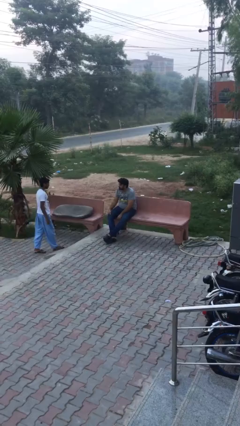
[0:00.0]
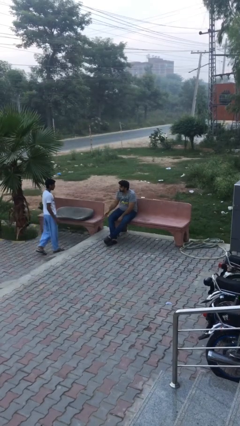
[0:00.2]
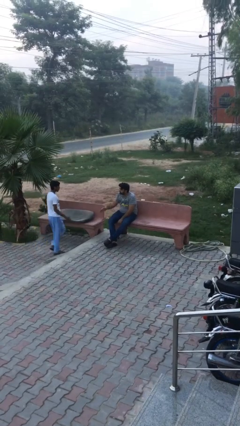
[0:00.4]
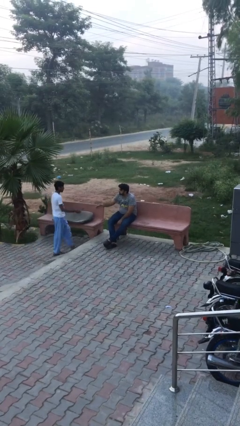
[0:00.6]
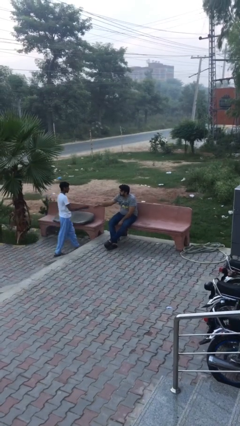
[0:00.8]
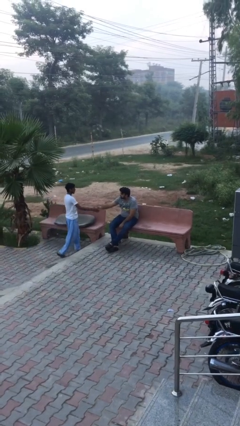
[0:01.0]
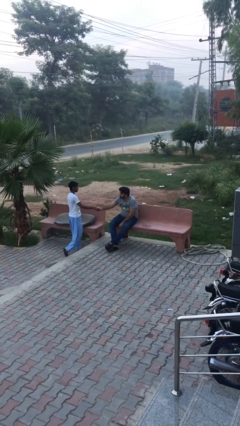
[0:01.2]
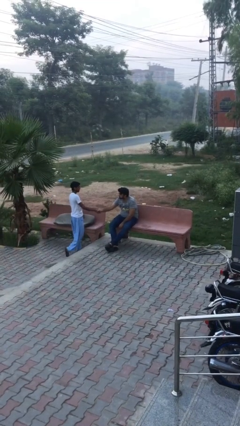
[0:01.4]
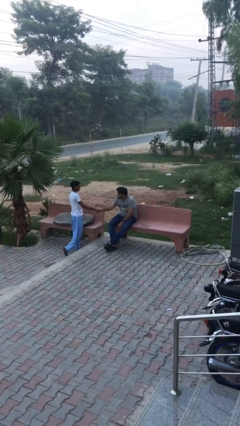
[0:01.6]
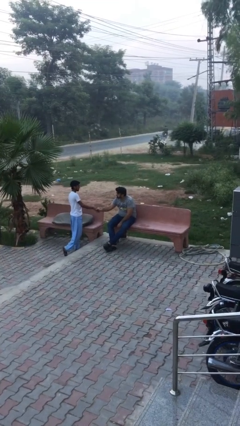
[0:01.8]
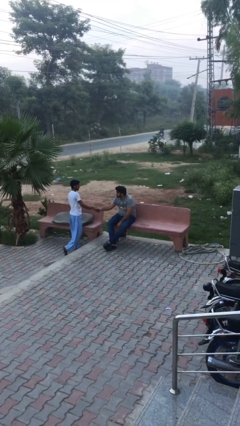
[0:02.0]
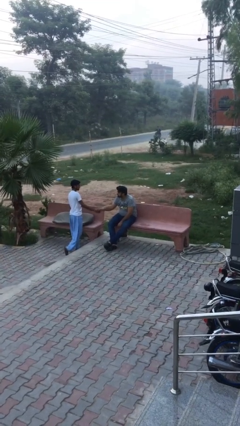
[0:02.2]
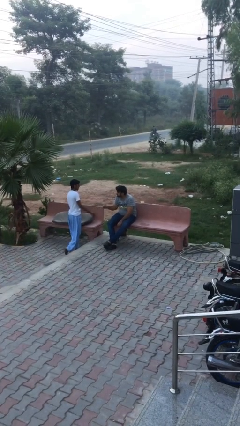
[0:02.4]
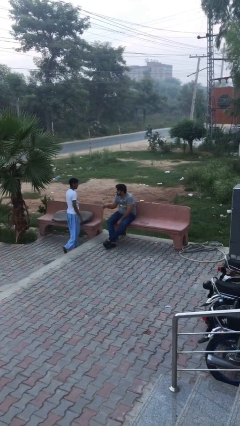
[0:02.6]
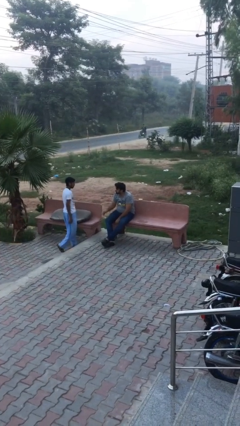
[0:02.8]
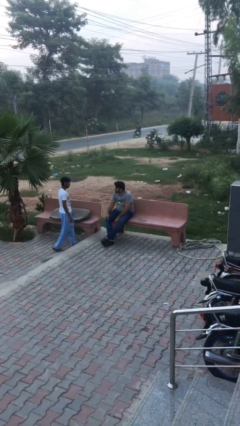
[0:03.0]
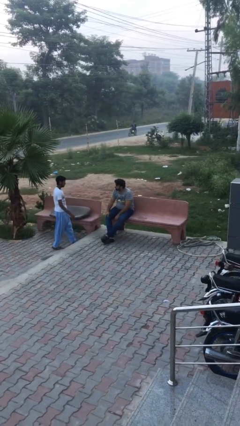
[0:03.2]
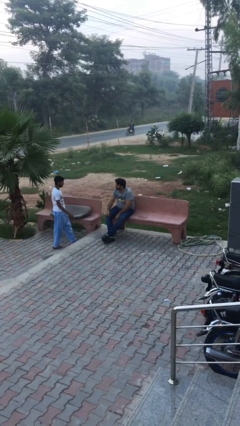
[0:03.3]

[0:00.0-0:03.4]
person shakes hand

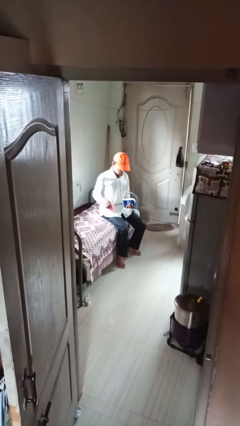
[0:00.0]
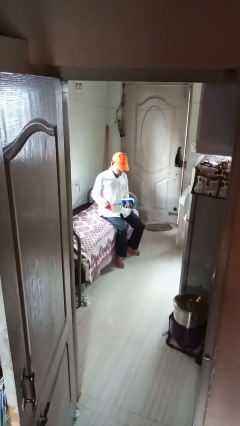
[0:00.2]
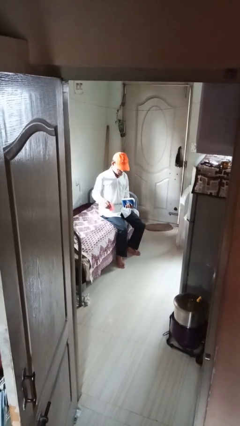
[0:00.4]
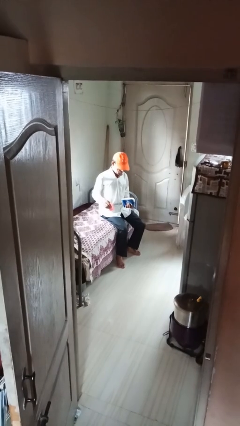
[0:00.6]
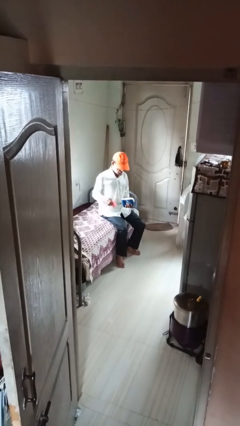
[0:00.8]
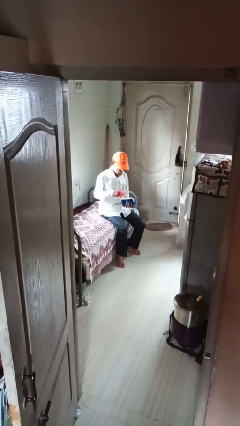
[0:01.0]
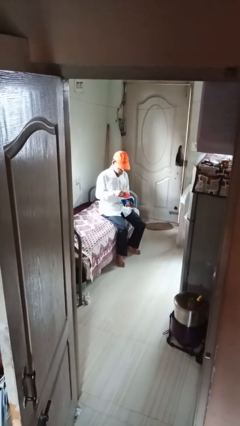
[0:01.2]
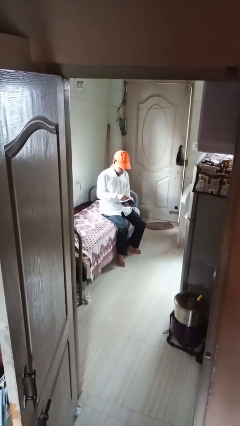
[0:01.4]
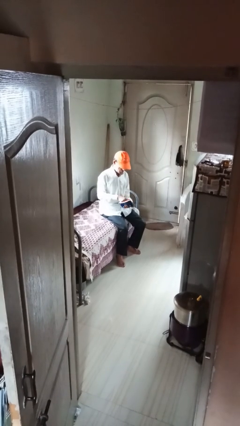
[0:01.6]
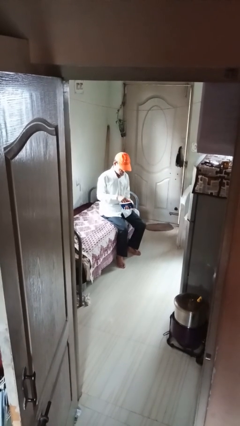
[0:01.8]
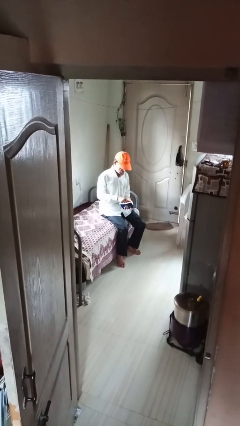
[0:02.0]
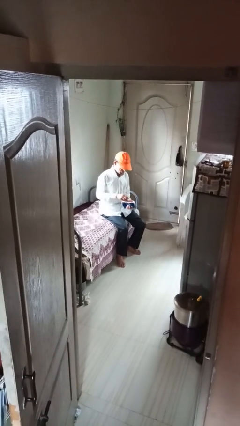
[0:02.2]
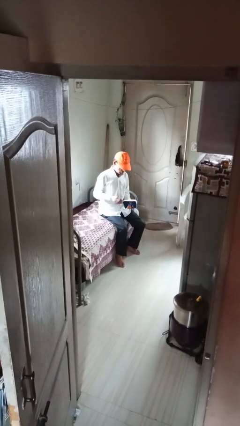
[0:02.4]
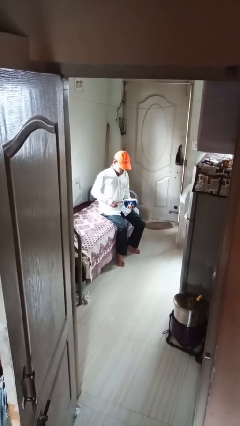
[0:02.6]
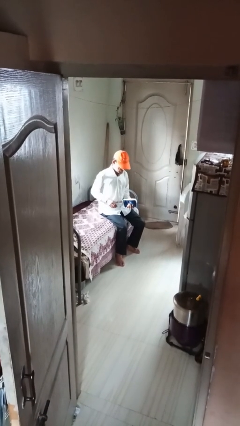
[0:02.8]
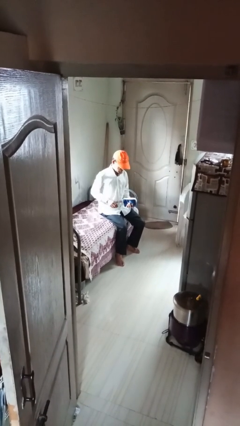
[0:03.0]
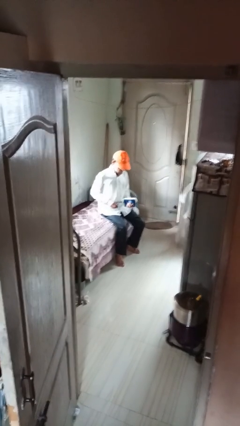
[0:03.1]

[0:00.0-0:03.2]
person puts object into purse

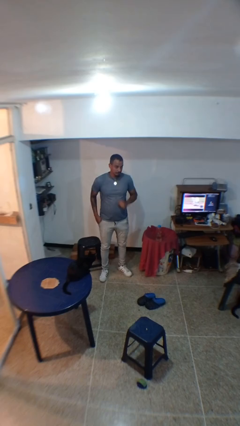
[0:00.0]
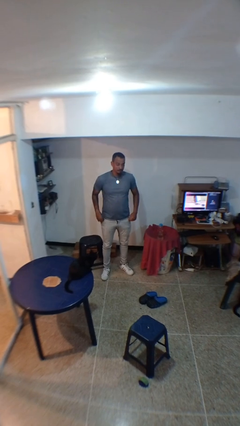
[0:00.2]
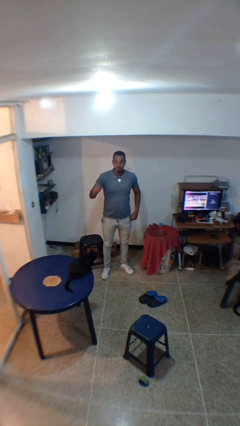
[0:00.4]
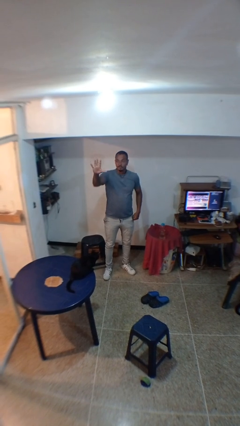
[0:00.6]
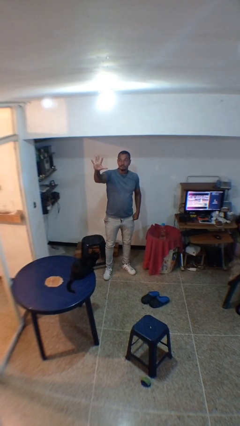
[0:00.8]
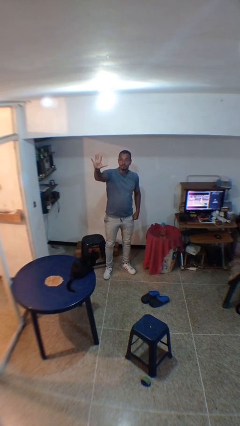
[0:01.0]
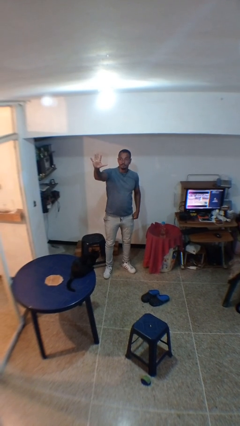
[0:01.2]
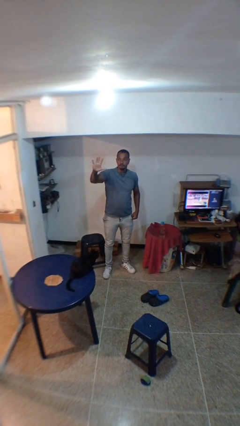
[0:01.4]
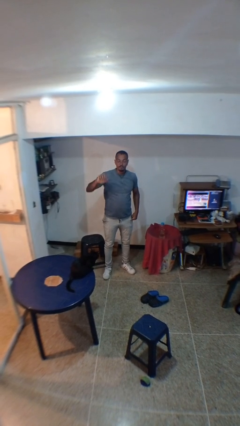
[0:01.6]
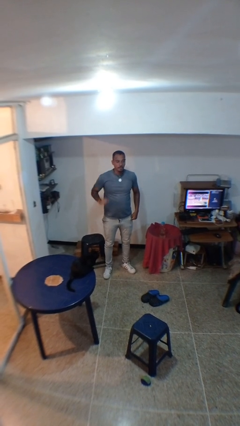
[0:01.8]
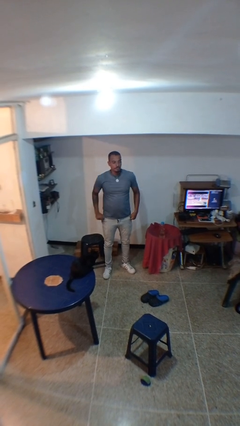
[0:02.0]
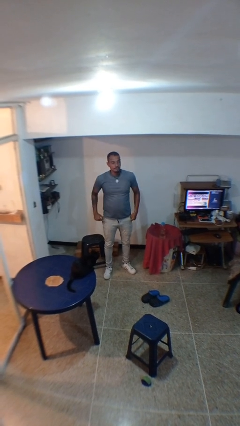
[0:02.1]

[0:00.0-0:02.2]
person gestures number five

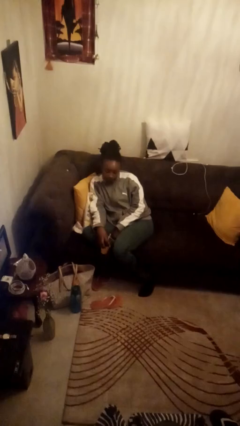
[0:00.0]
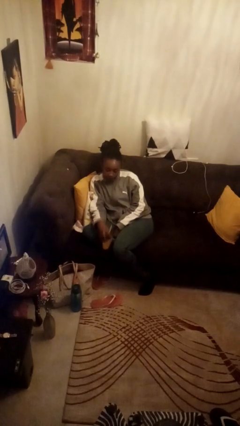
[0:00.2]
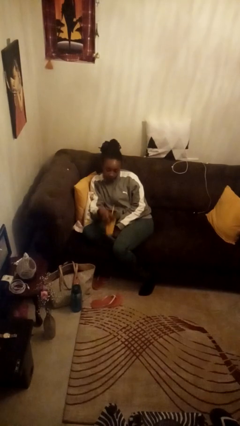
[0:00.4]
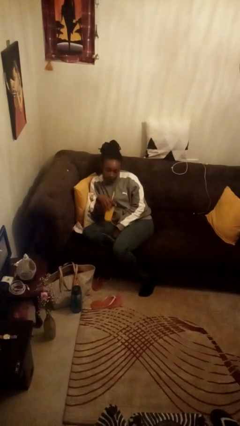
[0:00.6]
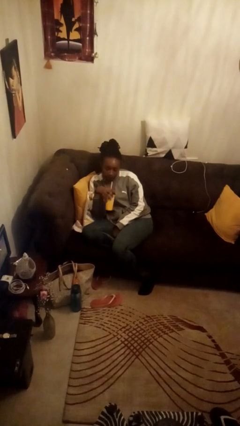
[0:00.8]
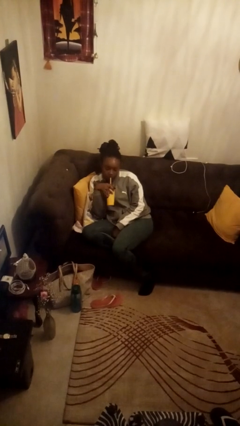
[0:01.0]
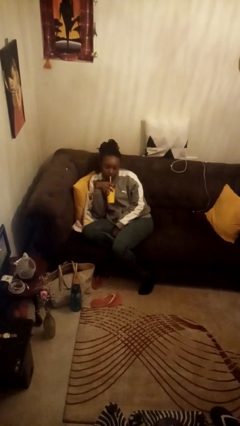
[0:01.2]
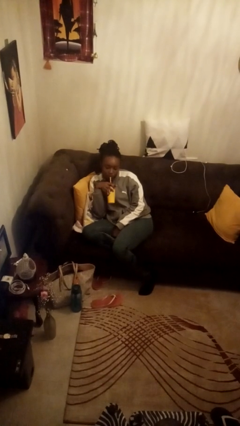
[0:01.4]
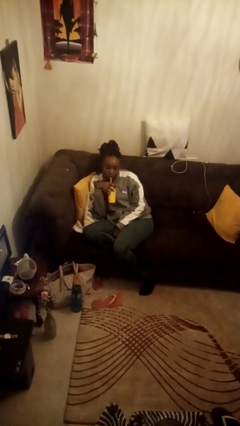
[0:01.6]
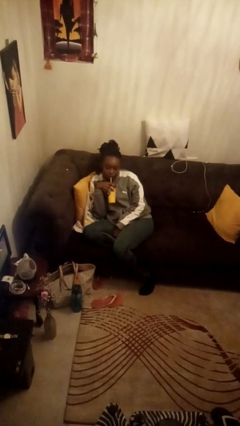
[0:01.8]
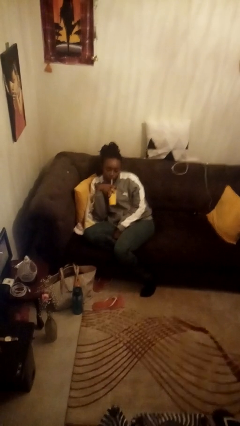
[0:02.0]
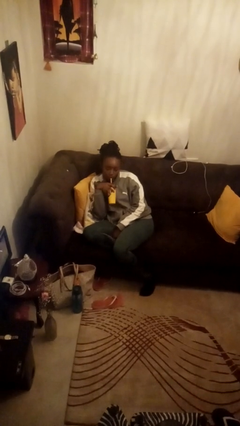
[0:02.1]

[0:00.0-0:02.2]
person drinks from straw

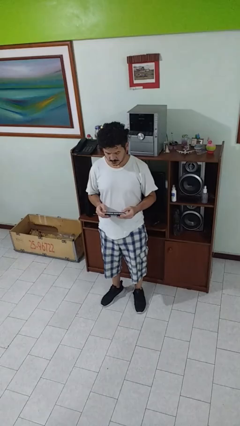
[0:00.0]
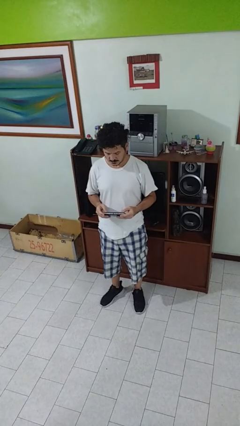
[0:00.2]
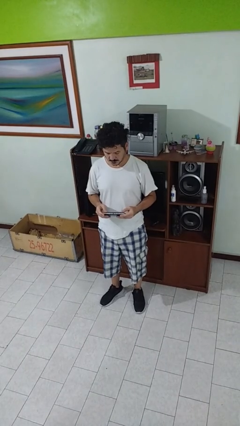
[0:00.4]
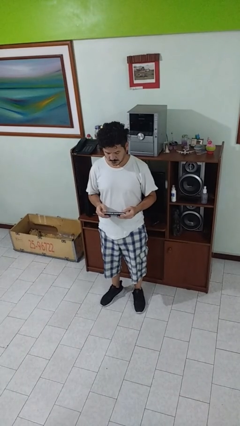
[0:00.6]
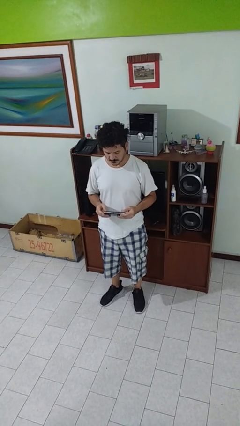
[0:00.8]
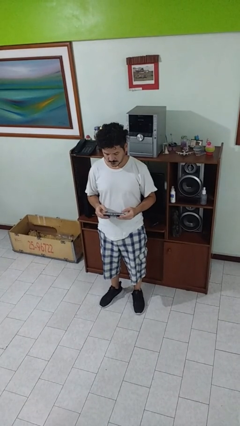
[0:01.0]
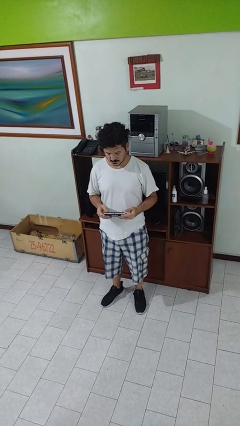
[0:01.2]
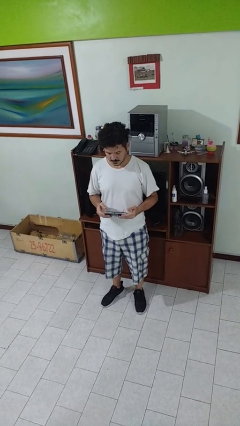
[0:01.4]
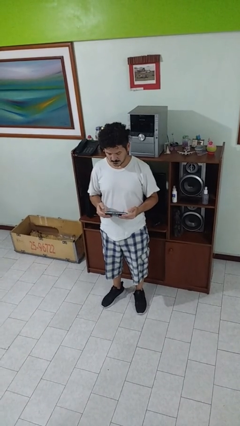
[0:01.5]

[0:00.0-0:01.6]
person interacts with handheld game

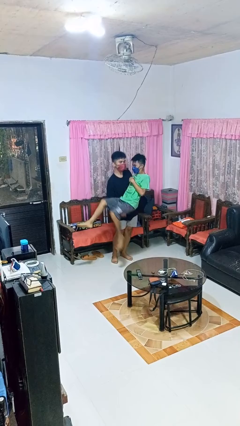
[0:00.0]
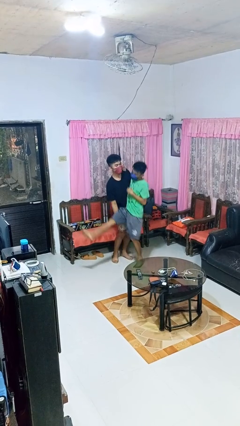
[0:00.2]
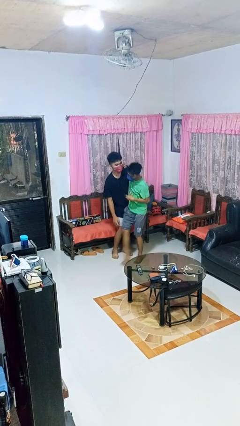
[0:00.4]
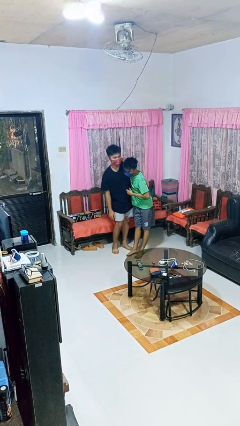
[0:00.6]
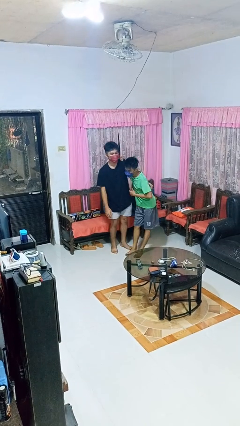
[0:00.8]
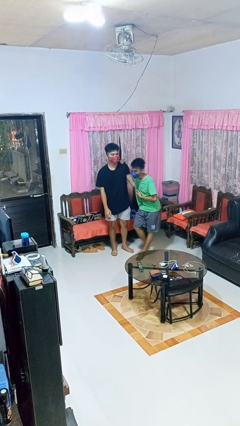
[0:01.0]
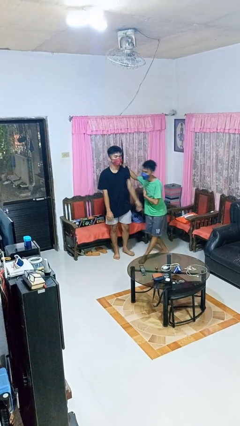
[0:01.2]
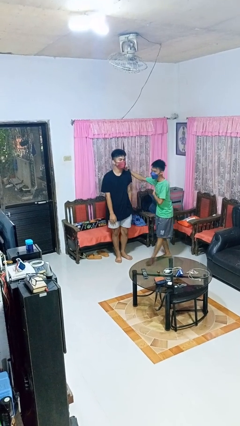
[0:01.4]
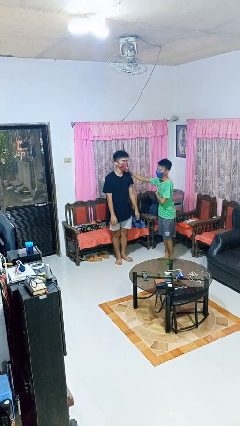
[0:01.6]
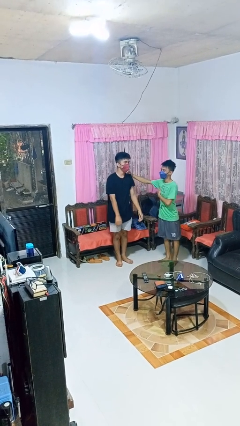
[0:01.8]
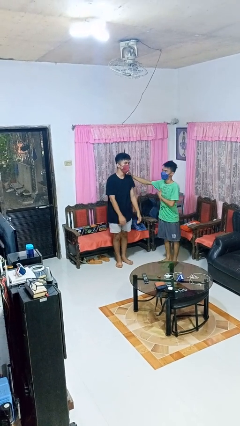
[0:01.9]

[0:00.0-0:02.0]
person puts down person

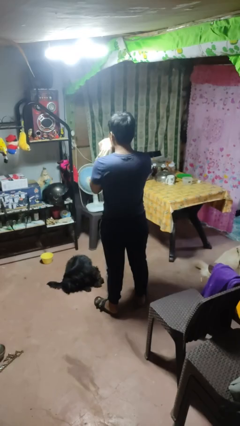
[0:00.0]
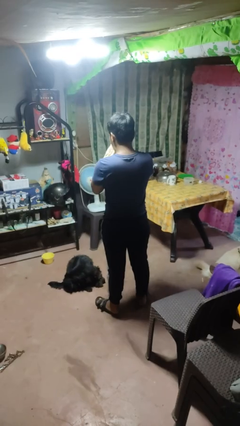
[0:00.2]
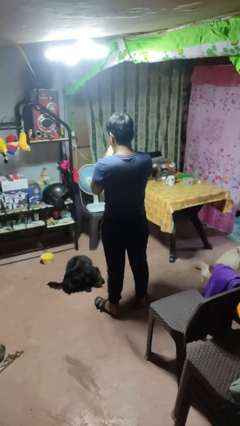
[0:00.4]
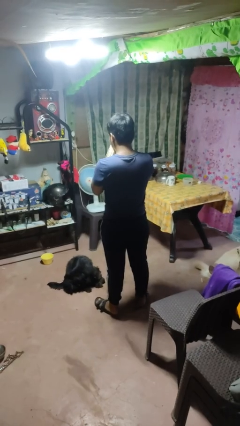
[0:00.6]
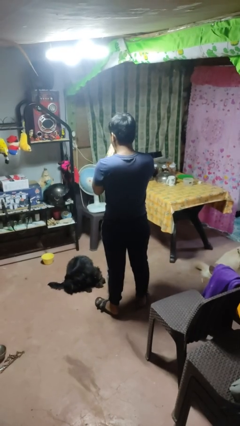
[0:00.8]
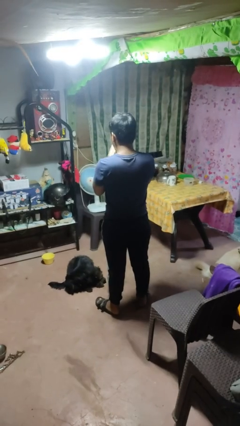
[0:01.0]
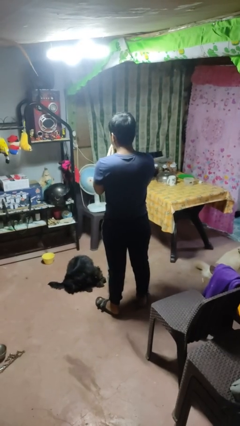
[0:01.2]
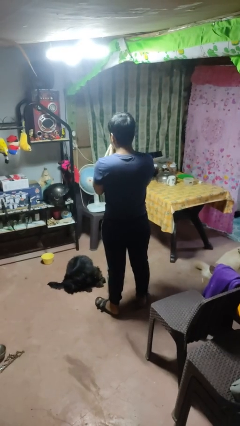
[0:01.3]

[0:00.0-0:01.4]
person blows nose

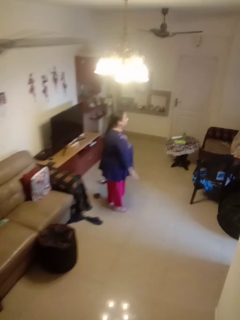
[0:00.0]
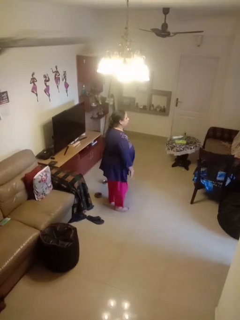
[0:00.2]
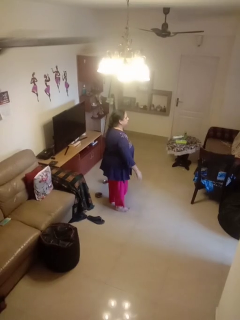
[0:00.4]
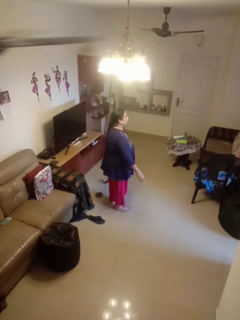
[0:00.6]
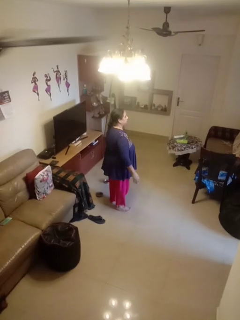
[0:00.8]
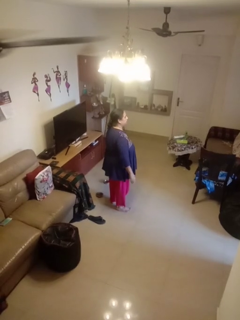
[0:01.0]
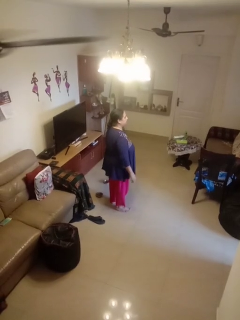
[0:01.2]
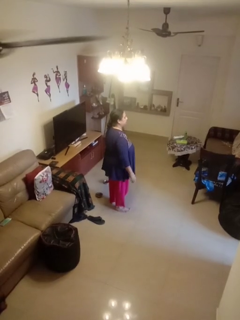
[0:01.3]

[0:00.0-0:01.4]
person slaps hands on thighs
